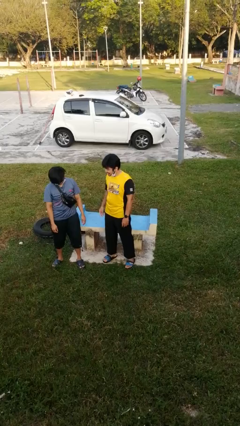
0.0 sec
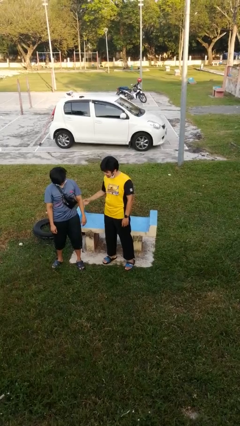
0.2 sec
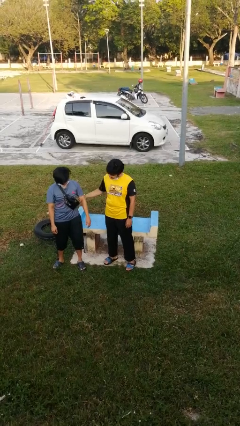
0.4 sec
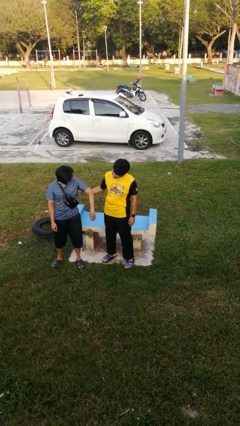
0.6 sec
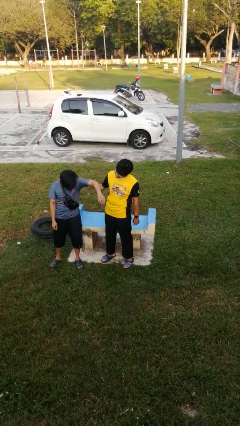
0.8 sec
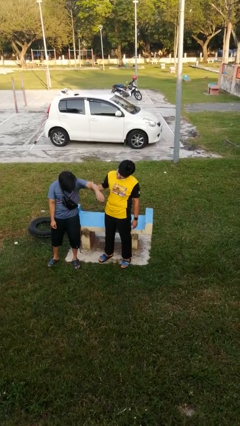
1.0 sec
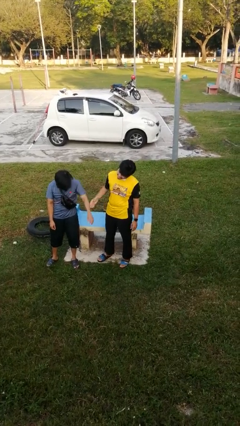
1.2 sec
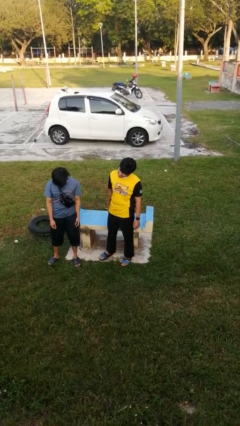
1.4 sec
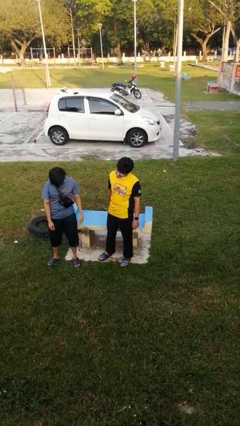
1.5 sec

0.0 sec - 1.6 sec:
person grabs person by bicep

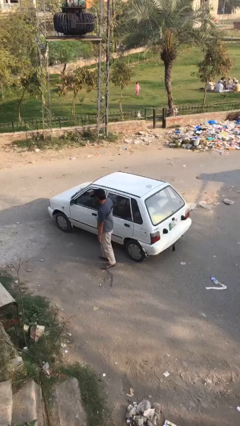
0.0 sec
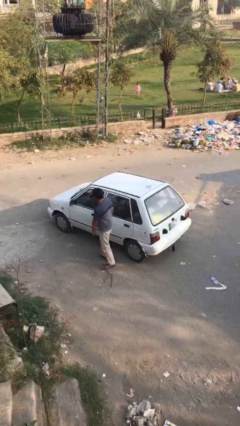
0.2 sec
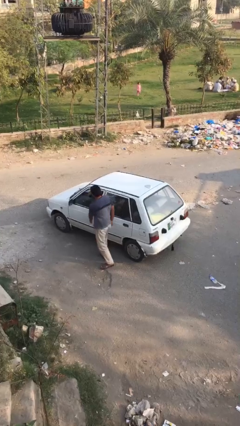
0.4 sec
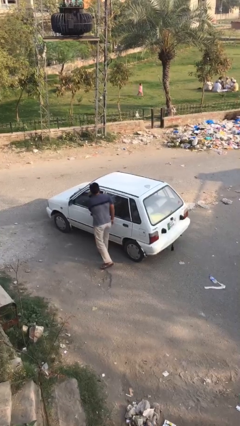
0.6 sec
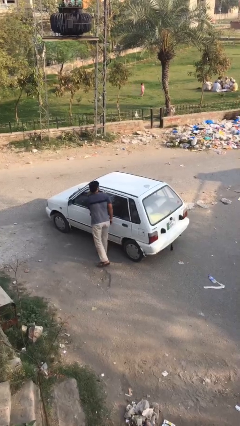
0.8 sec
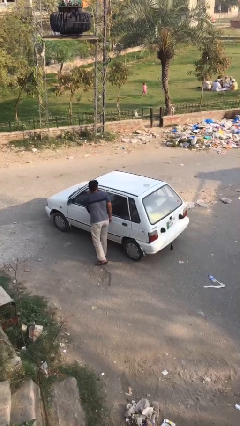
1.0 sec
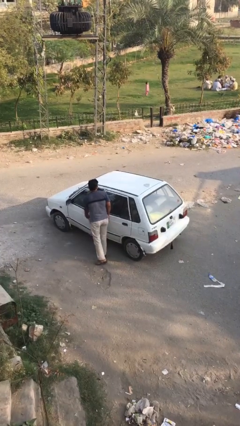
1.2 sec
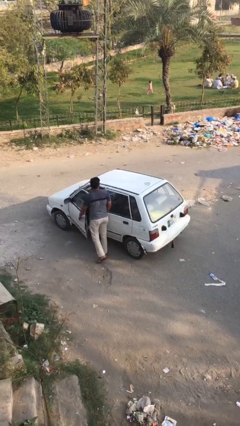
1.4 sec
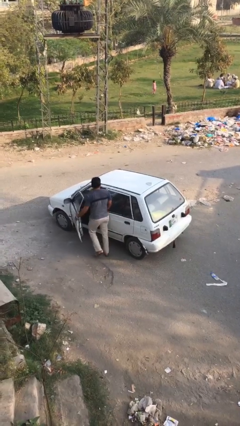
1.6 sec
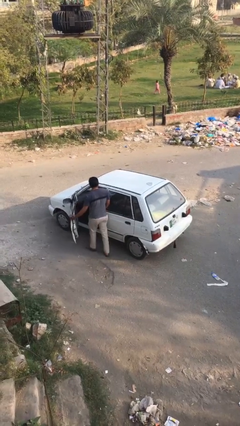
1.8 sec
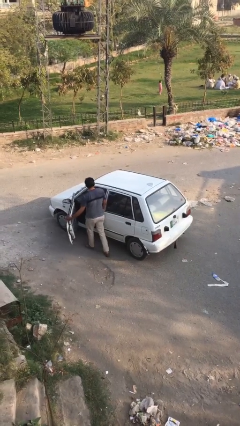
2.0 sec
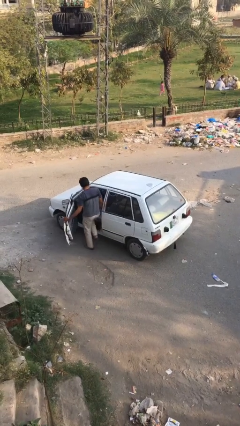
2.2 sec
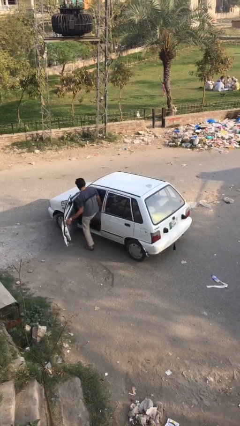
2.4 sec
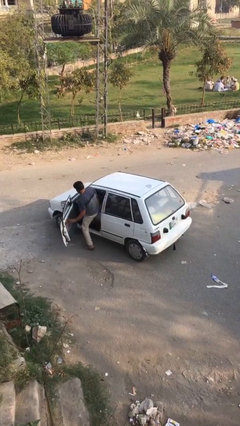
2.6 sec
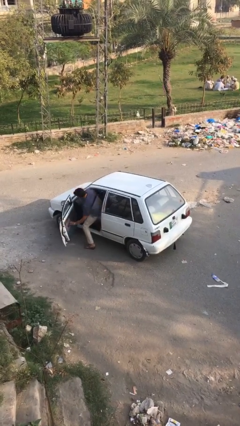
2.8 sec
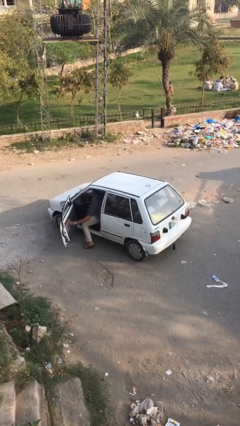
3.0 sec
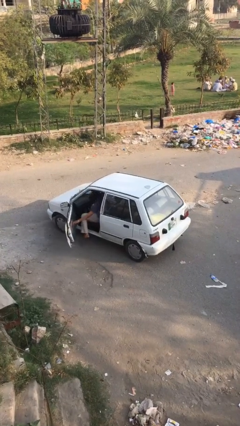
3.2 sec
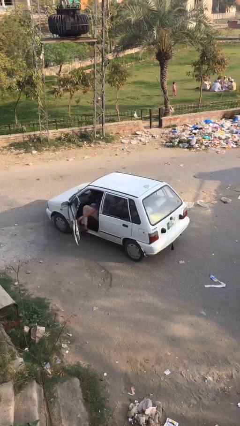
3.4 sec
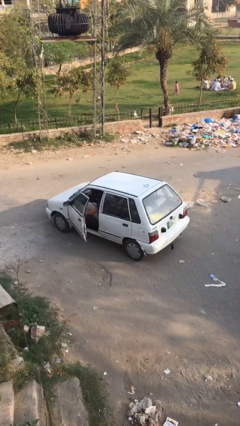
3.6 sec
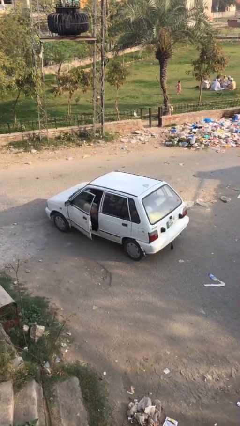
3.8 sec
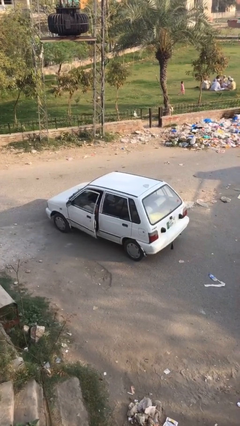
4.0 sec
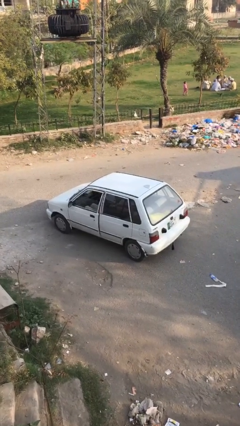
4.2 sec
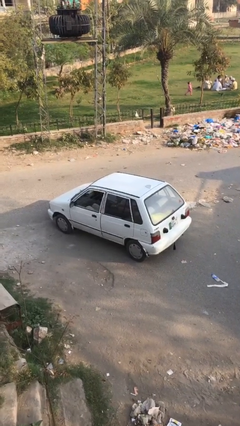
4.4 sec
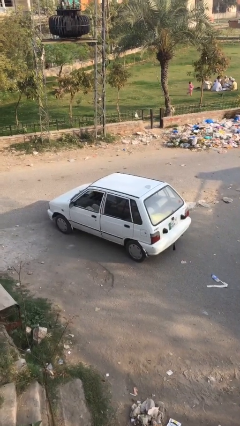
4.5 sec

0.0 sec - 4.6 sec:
car picks up person

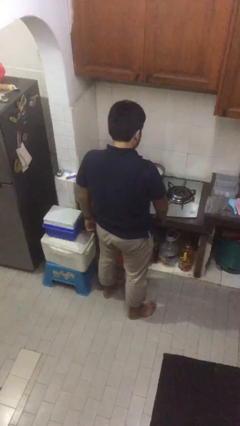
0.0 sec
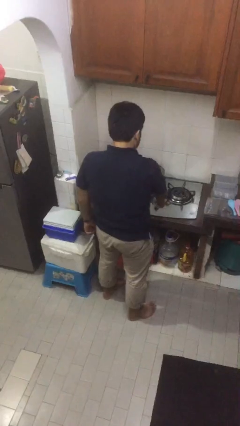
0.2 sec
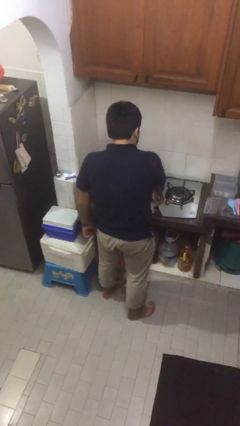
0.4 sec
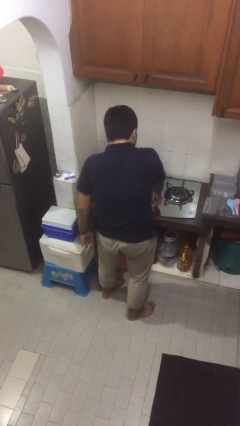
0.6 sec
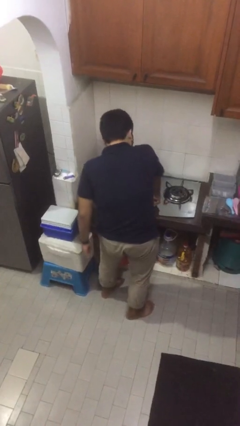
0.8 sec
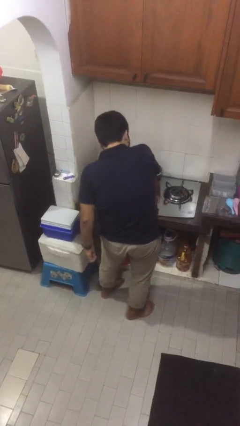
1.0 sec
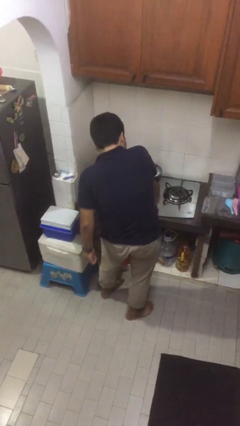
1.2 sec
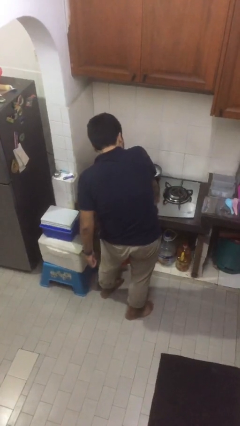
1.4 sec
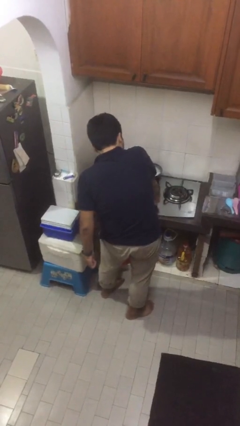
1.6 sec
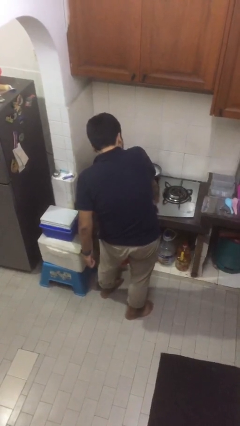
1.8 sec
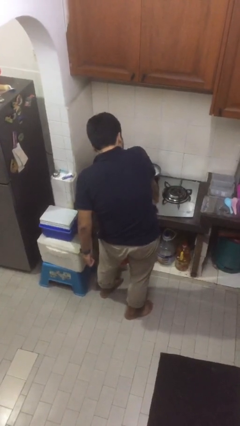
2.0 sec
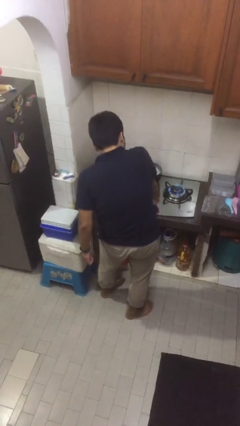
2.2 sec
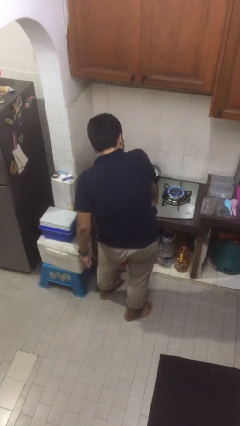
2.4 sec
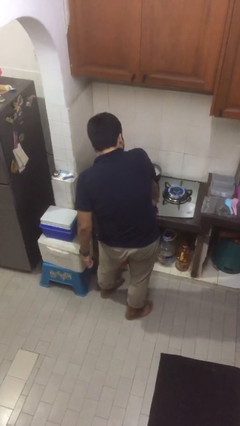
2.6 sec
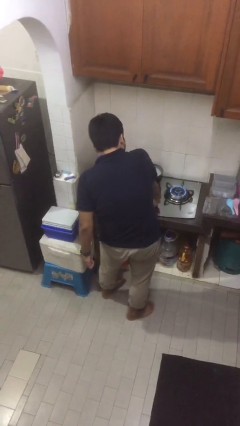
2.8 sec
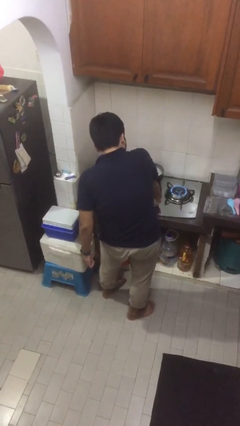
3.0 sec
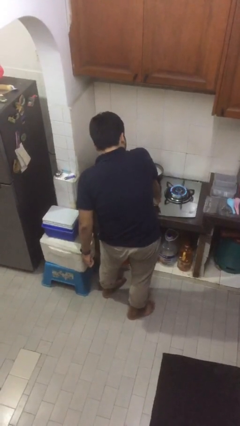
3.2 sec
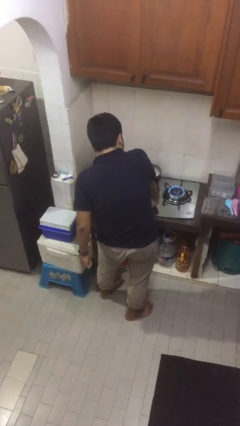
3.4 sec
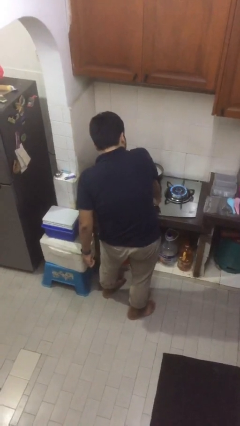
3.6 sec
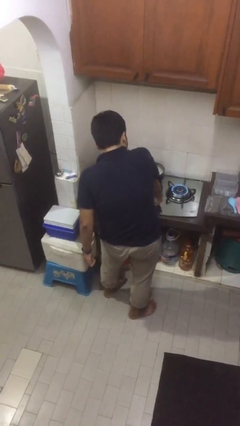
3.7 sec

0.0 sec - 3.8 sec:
person turns on stovetop

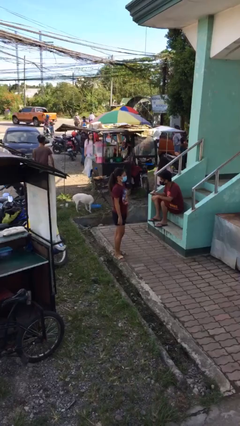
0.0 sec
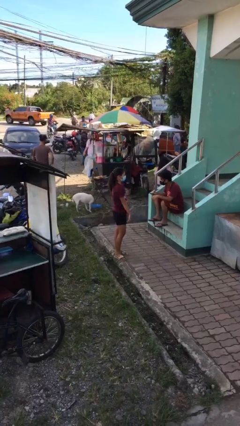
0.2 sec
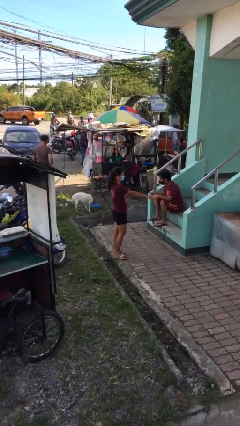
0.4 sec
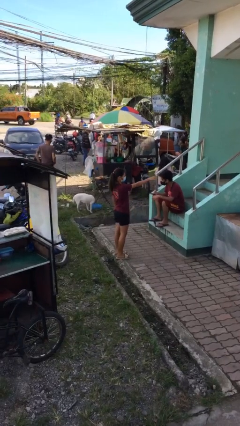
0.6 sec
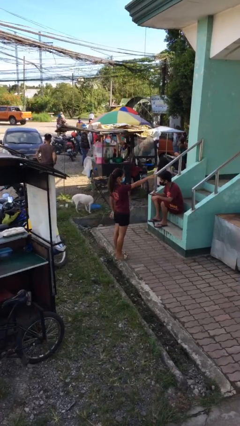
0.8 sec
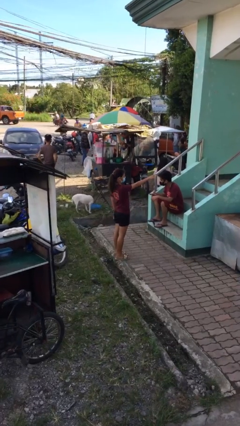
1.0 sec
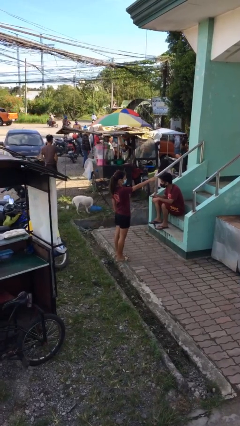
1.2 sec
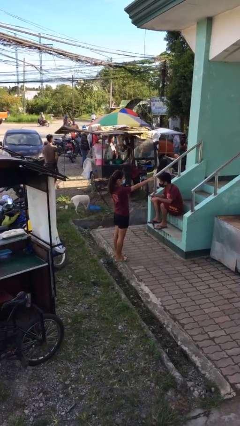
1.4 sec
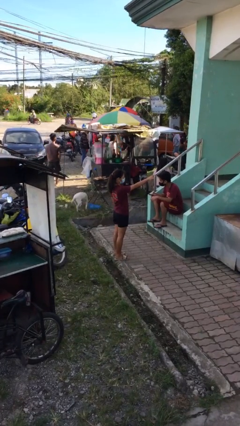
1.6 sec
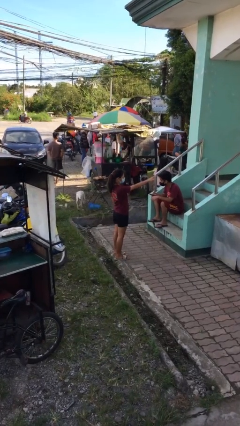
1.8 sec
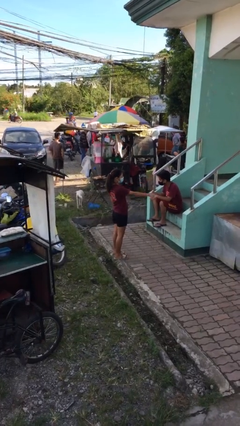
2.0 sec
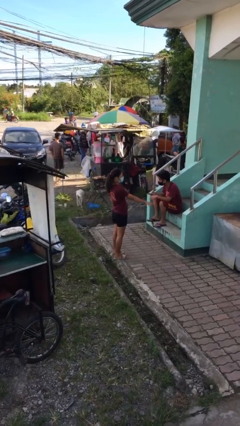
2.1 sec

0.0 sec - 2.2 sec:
person points at person

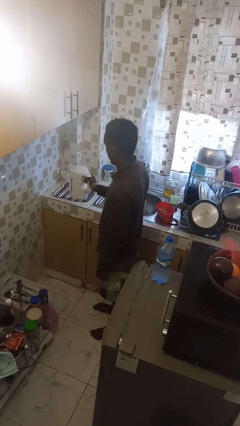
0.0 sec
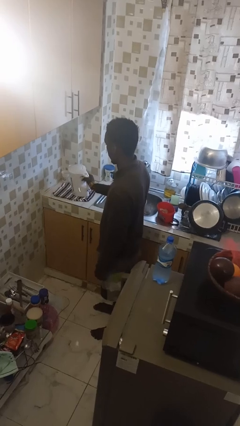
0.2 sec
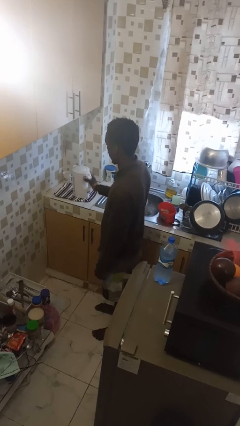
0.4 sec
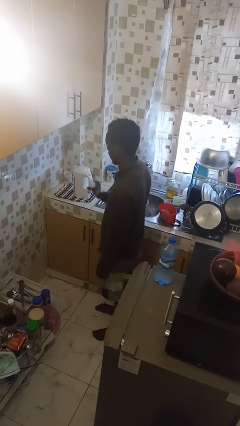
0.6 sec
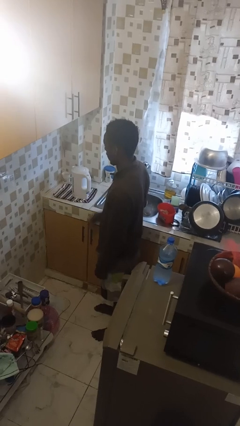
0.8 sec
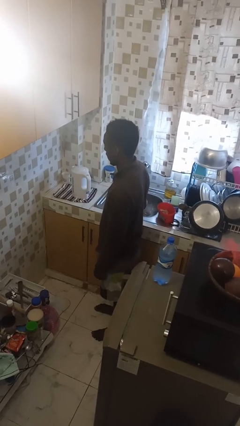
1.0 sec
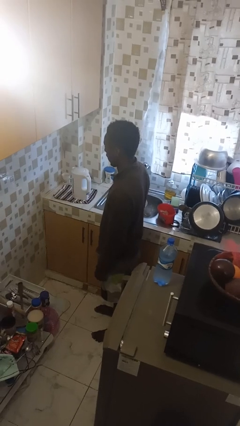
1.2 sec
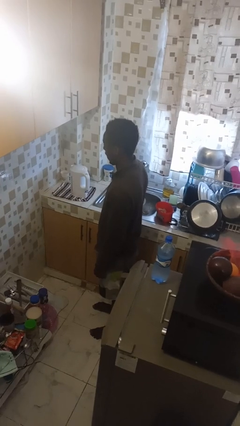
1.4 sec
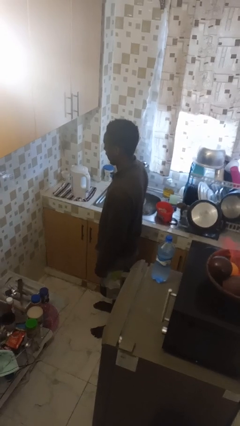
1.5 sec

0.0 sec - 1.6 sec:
person puts down object on countertop

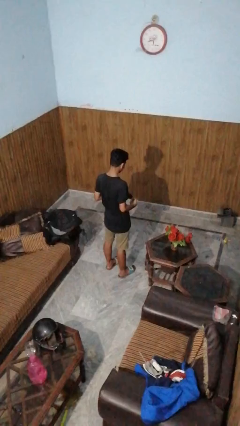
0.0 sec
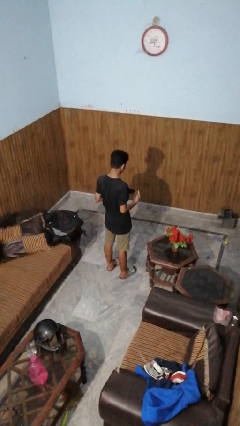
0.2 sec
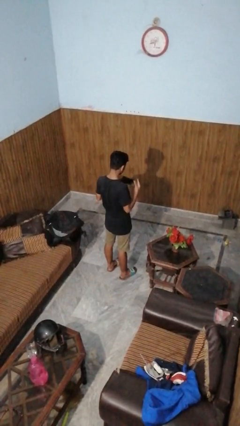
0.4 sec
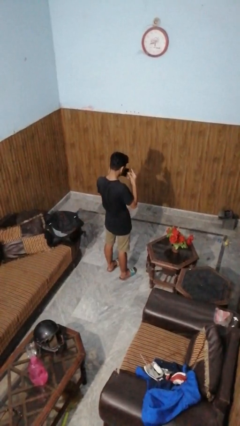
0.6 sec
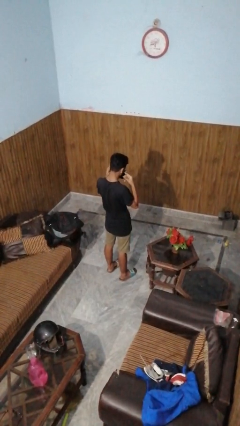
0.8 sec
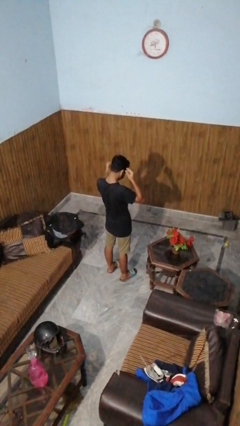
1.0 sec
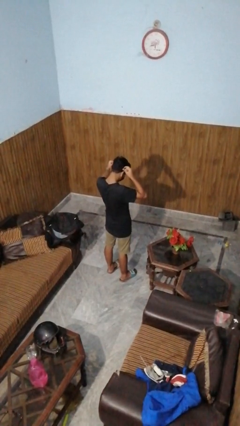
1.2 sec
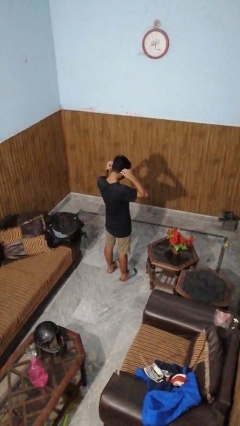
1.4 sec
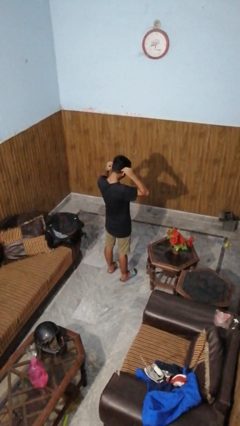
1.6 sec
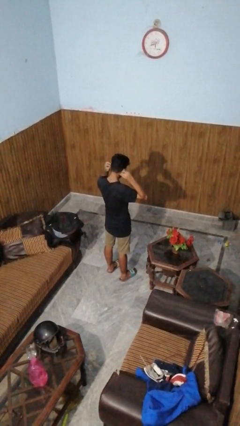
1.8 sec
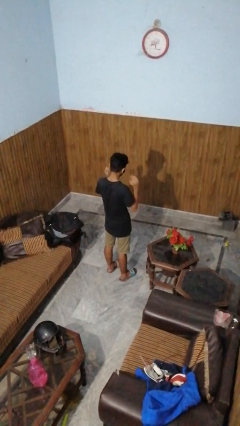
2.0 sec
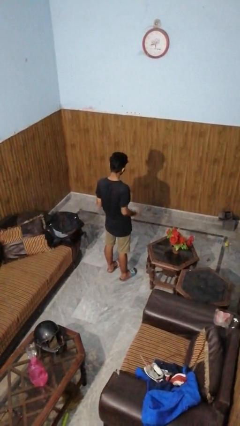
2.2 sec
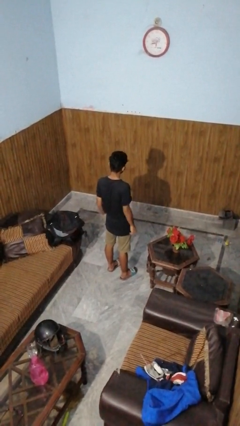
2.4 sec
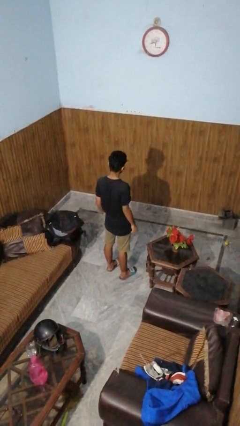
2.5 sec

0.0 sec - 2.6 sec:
person puts on facemask

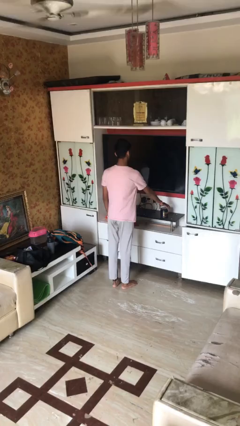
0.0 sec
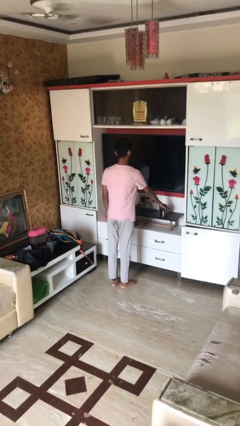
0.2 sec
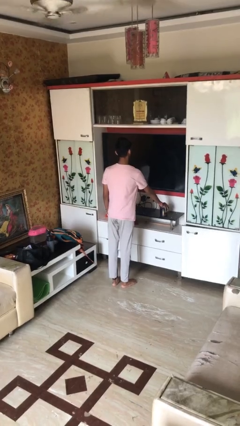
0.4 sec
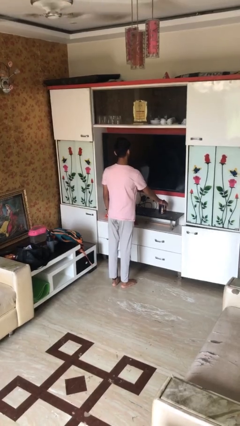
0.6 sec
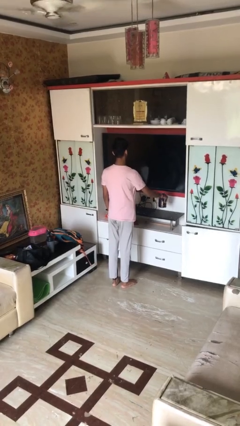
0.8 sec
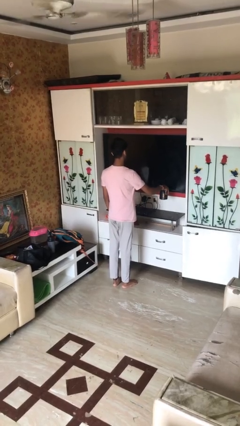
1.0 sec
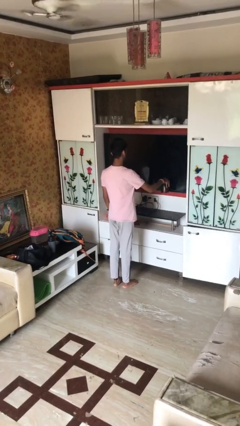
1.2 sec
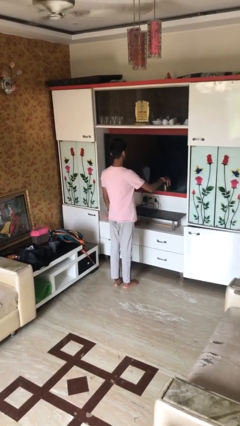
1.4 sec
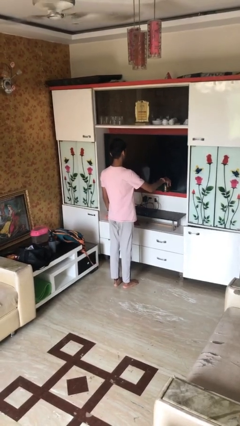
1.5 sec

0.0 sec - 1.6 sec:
person picks up object from countertop
